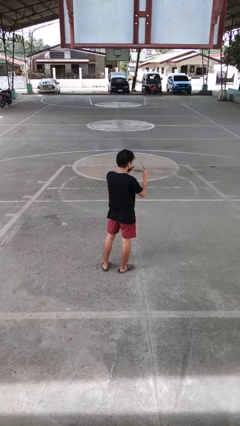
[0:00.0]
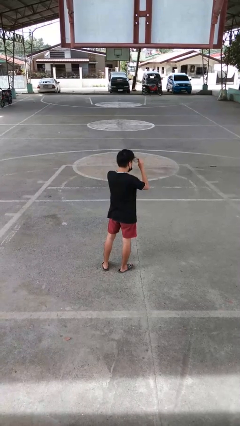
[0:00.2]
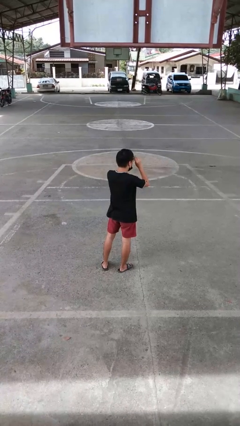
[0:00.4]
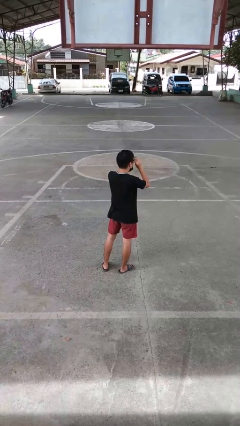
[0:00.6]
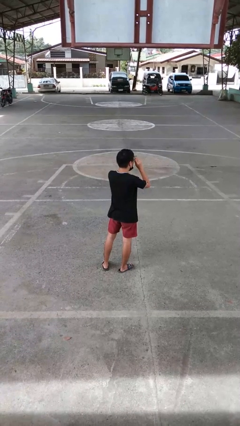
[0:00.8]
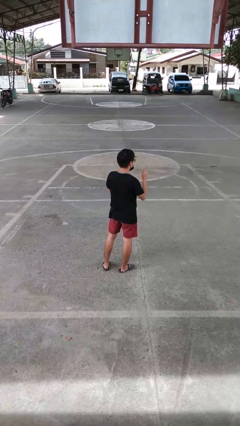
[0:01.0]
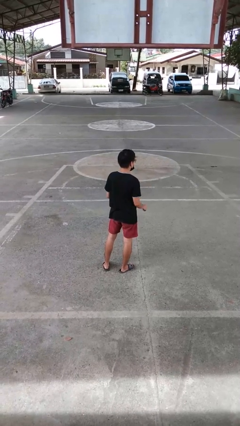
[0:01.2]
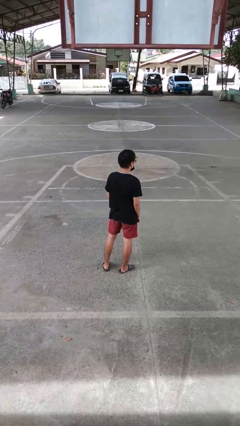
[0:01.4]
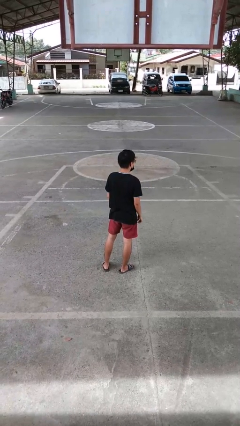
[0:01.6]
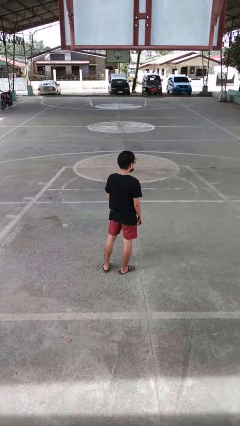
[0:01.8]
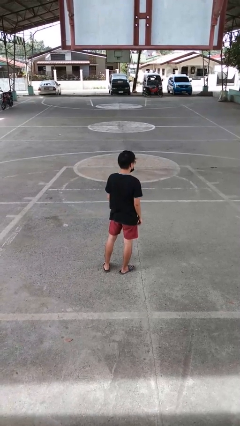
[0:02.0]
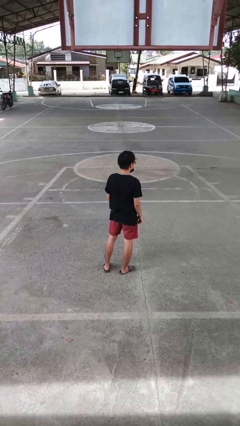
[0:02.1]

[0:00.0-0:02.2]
person puts on glasses

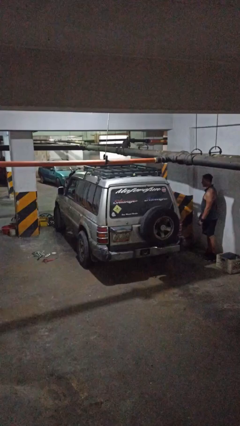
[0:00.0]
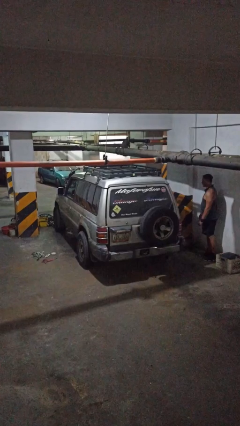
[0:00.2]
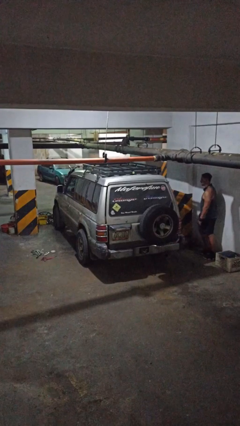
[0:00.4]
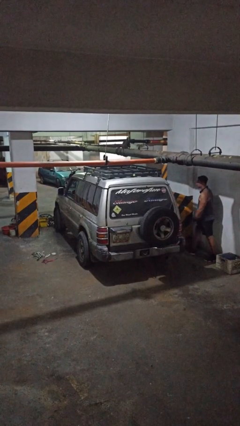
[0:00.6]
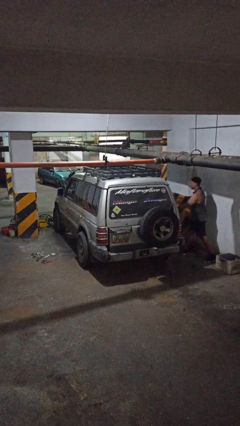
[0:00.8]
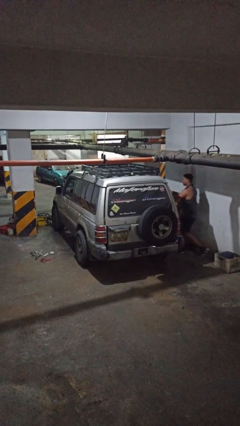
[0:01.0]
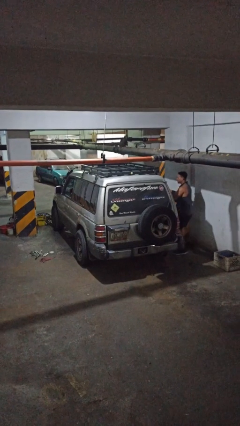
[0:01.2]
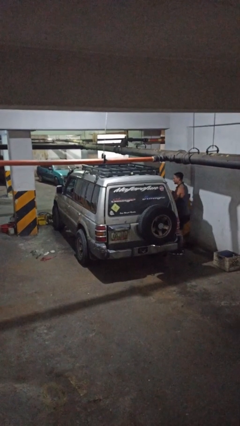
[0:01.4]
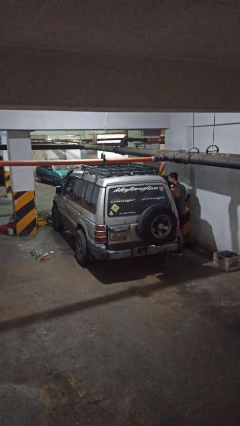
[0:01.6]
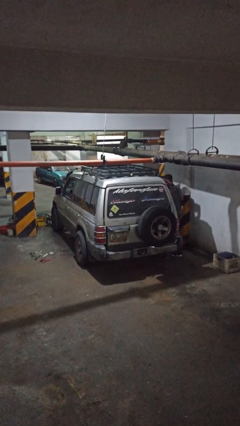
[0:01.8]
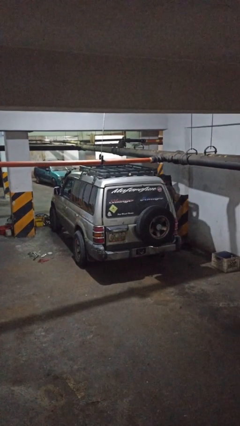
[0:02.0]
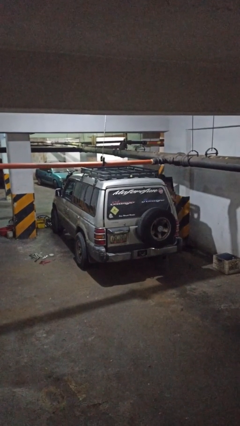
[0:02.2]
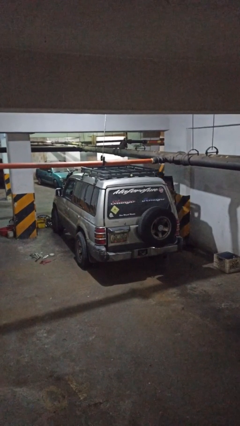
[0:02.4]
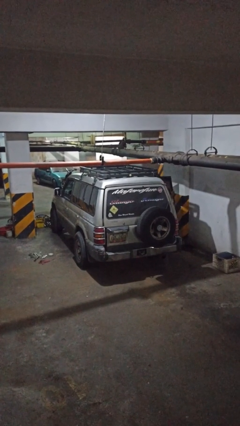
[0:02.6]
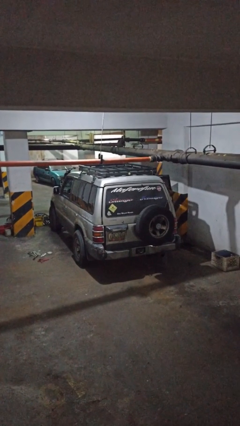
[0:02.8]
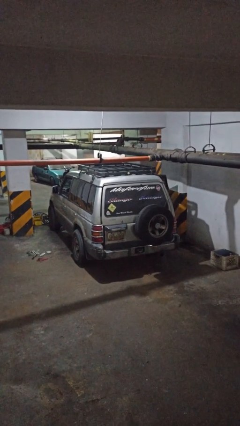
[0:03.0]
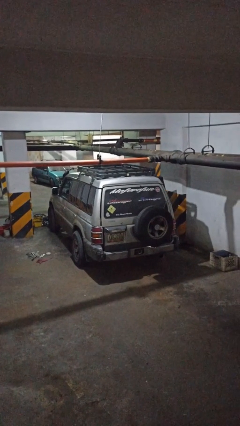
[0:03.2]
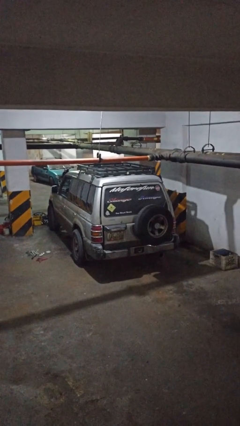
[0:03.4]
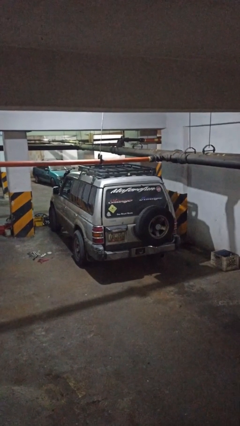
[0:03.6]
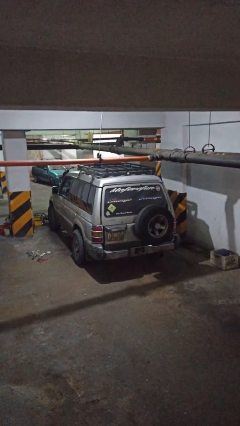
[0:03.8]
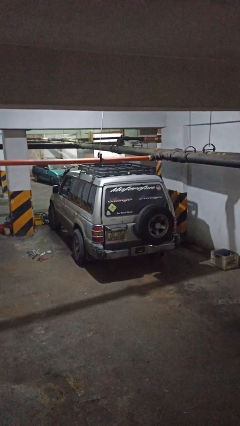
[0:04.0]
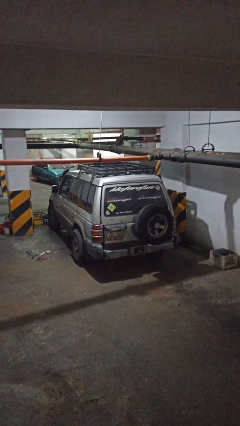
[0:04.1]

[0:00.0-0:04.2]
car picks up person

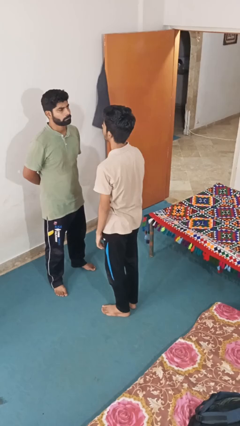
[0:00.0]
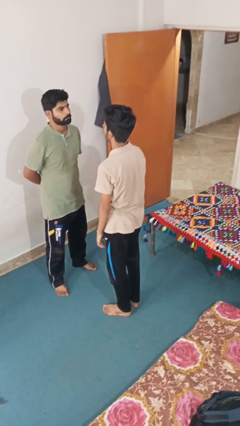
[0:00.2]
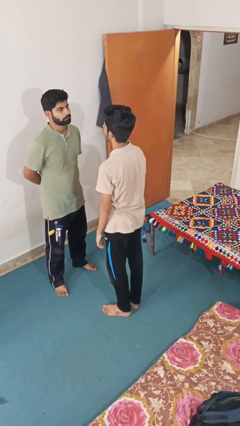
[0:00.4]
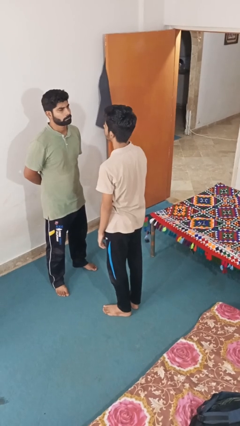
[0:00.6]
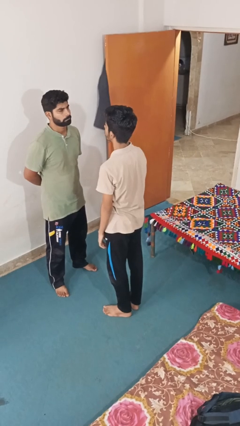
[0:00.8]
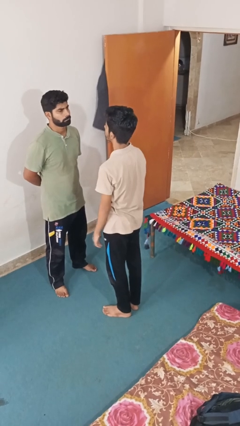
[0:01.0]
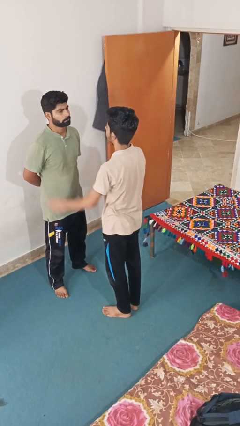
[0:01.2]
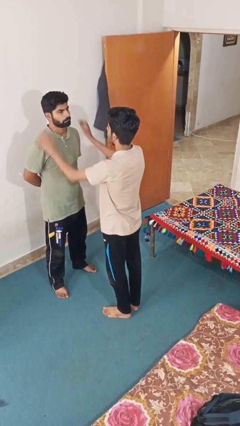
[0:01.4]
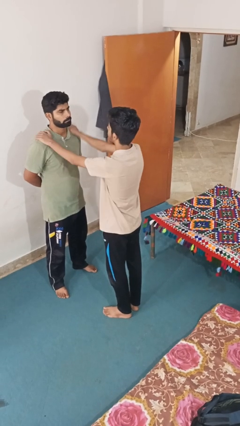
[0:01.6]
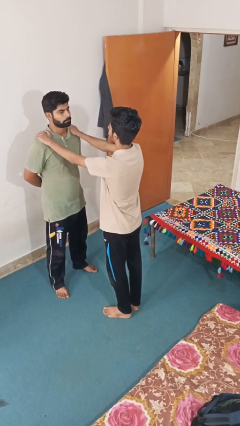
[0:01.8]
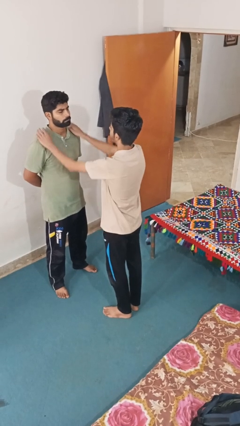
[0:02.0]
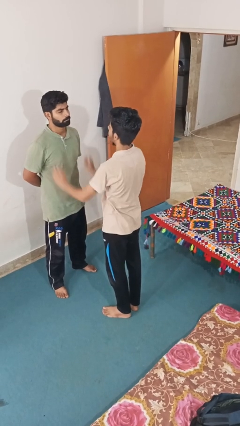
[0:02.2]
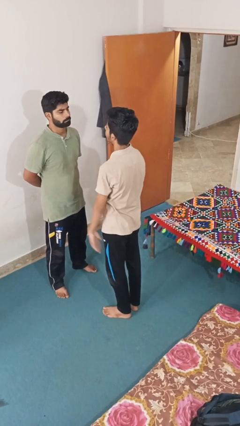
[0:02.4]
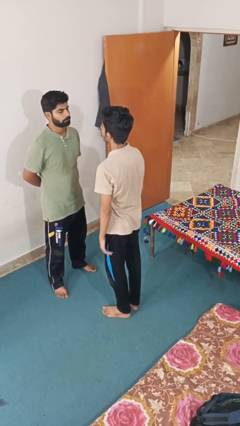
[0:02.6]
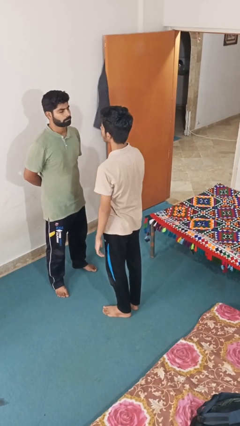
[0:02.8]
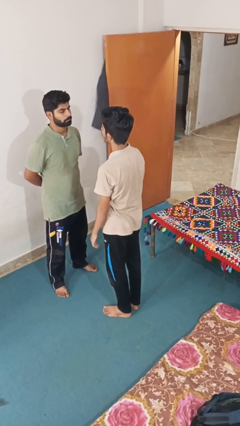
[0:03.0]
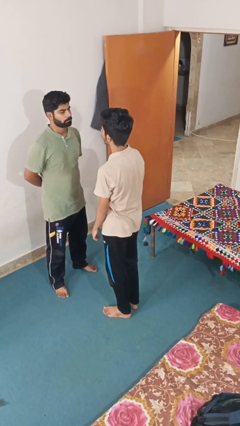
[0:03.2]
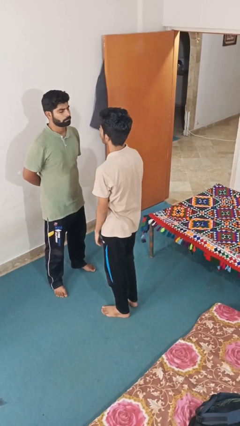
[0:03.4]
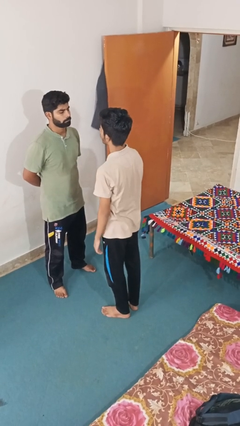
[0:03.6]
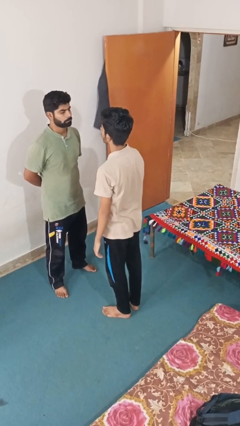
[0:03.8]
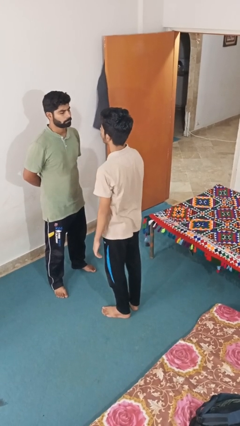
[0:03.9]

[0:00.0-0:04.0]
person pounds shoulders of person

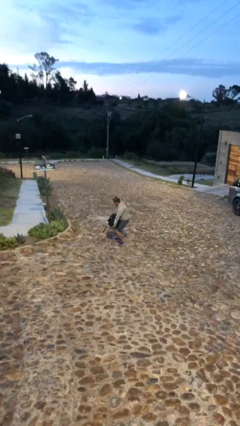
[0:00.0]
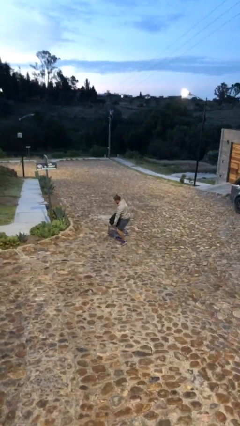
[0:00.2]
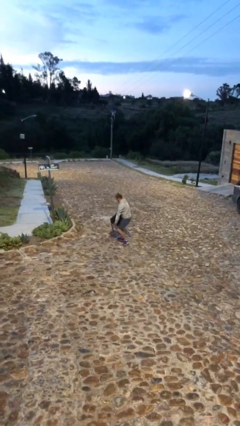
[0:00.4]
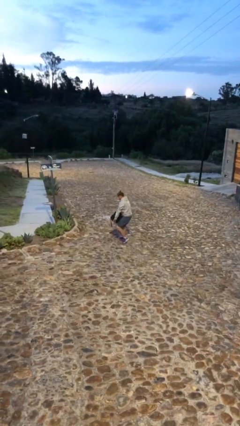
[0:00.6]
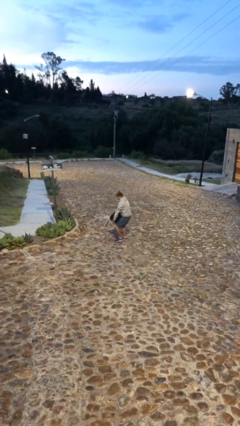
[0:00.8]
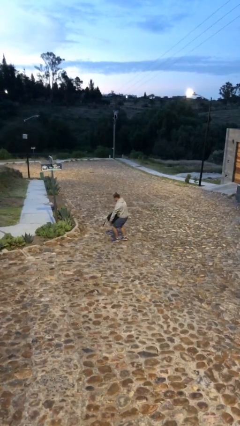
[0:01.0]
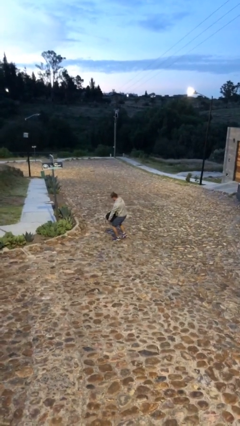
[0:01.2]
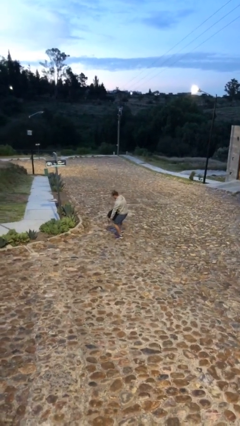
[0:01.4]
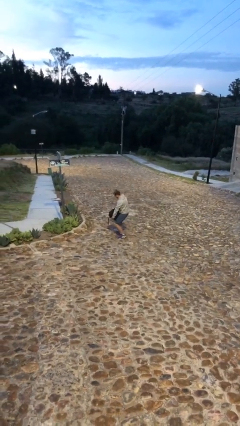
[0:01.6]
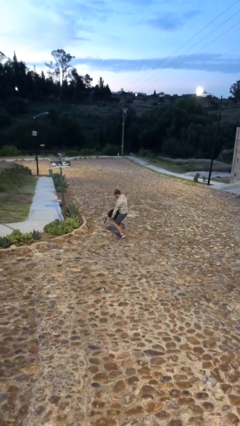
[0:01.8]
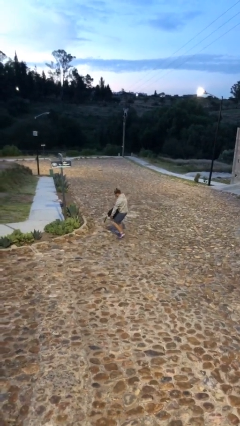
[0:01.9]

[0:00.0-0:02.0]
person carries heavy object

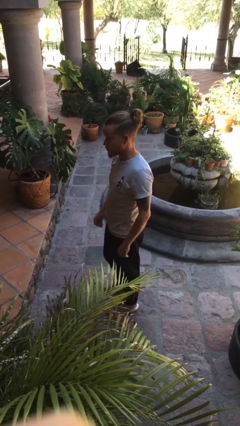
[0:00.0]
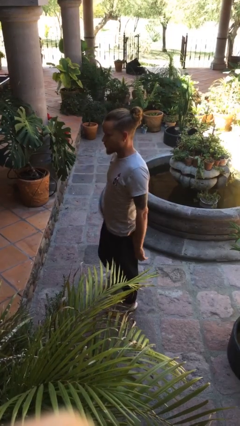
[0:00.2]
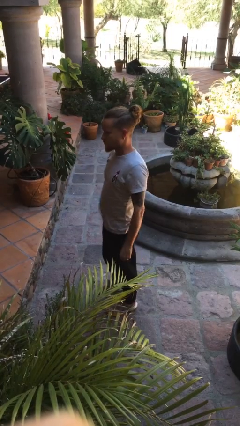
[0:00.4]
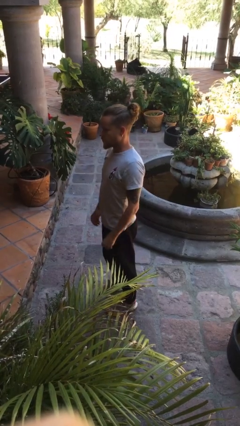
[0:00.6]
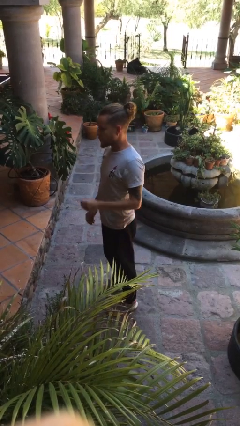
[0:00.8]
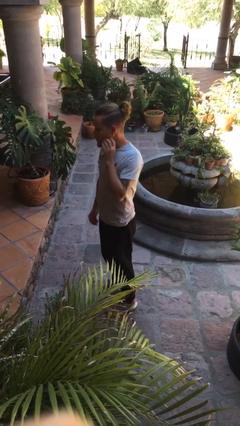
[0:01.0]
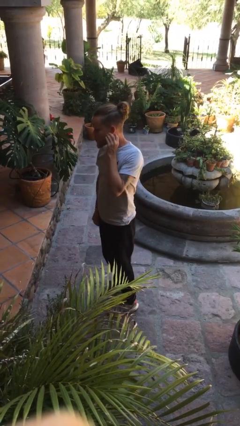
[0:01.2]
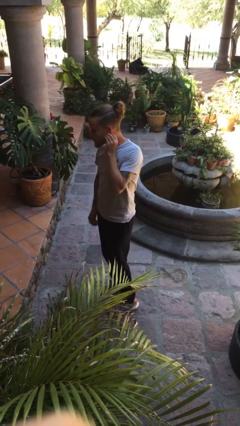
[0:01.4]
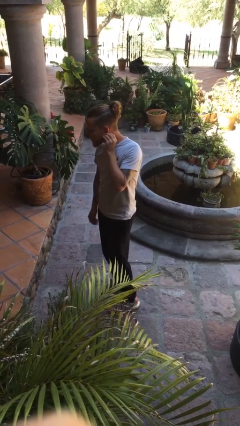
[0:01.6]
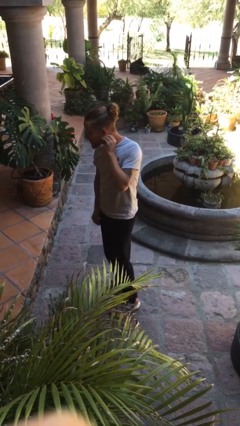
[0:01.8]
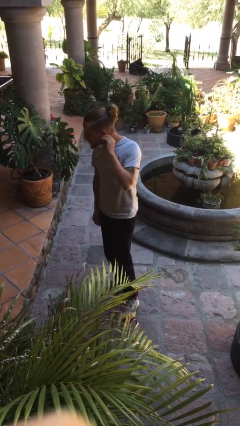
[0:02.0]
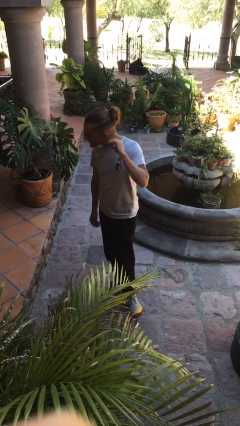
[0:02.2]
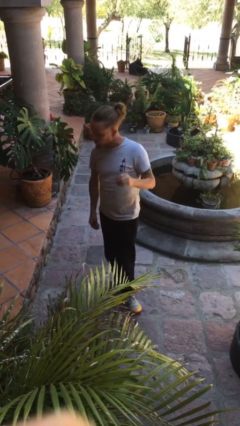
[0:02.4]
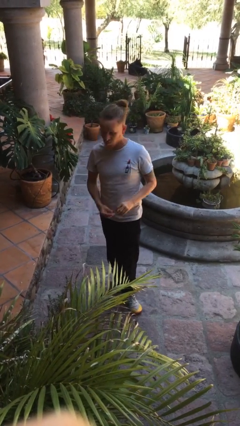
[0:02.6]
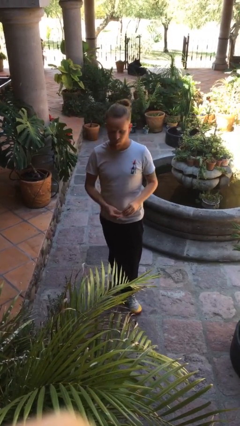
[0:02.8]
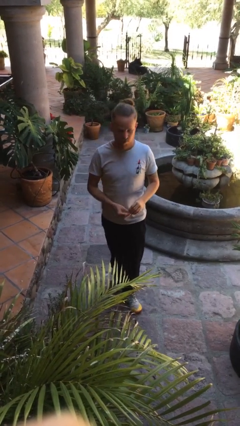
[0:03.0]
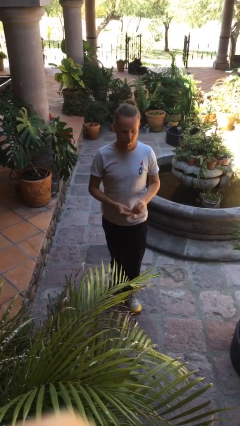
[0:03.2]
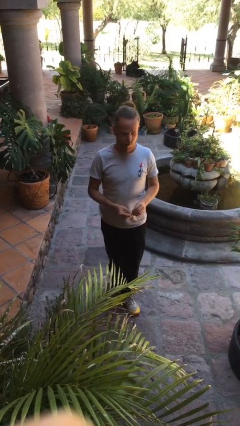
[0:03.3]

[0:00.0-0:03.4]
person takes off earrings

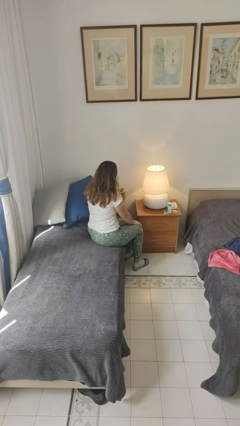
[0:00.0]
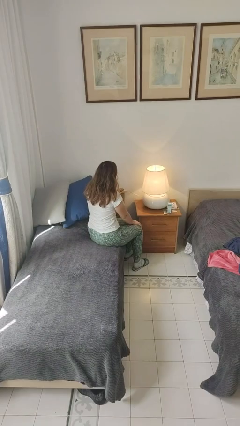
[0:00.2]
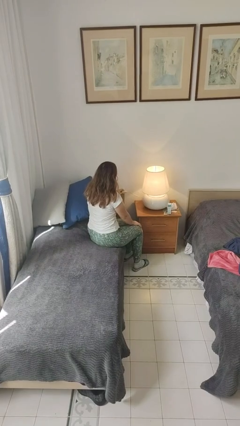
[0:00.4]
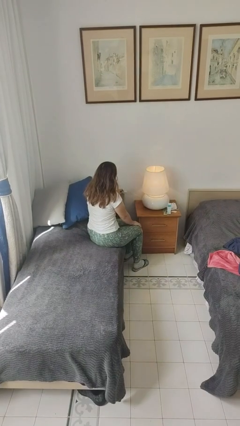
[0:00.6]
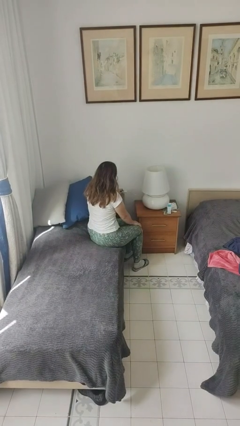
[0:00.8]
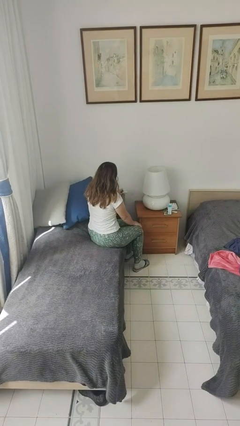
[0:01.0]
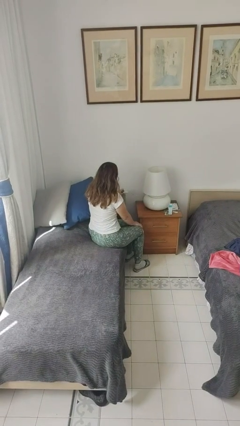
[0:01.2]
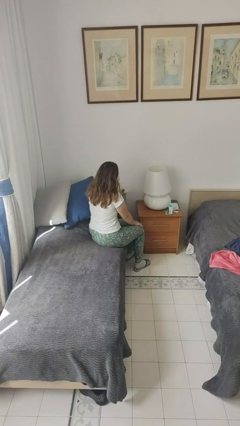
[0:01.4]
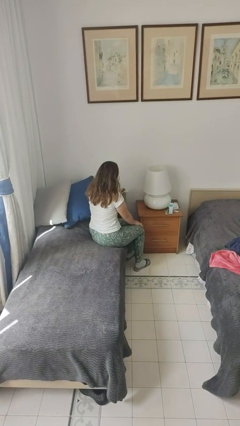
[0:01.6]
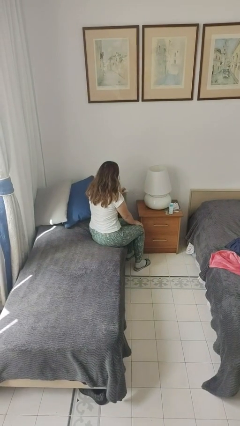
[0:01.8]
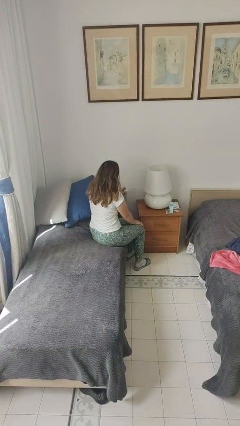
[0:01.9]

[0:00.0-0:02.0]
person turns off lamp
